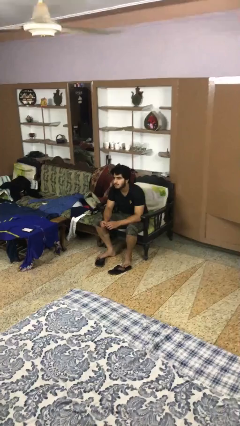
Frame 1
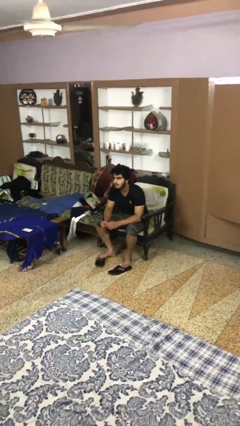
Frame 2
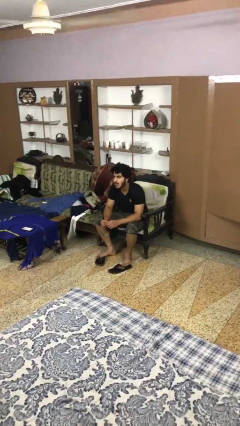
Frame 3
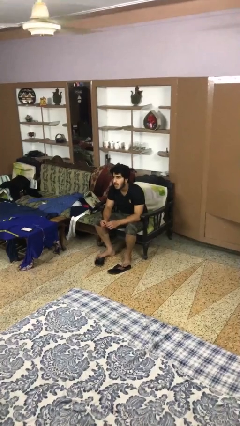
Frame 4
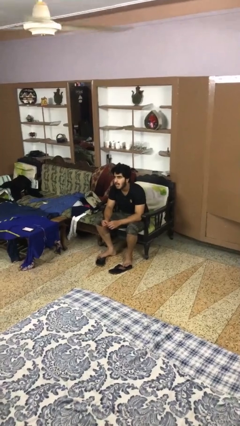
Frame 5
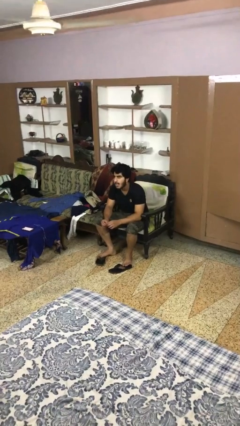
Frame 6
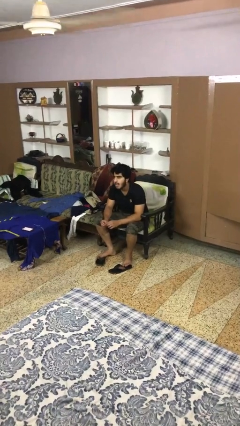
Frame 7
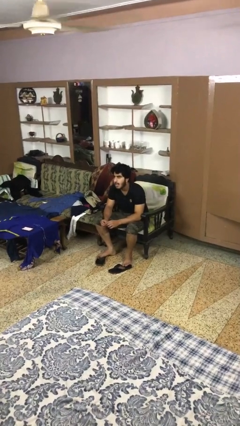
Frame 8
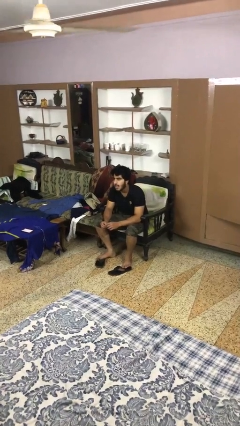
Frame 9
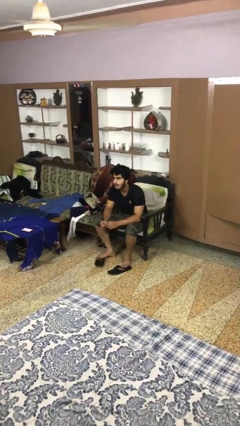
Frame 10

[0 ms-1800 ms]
person sticks out tongue

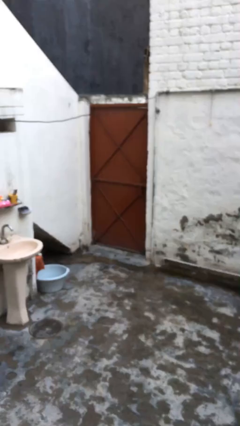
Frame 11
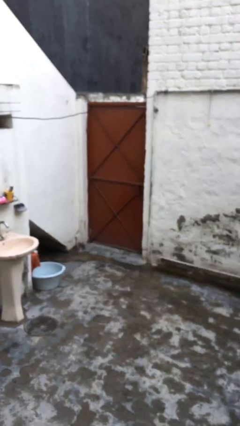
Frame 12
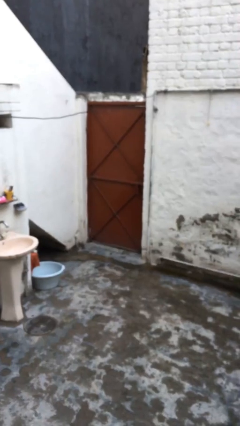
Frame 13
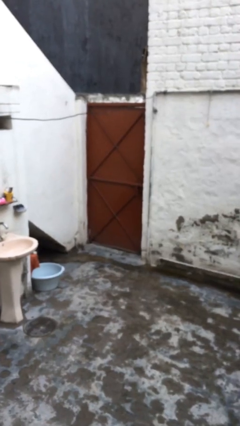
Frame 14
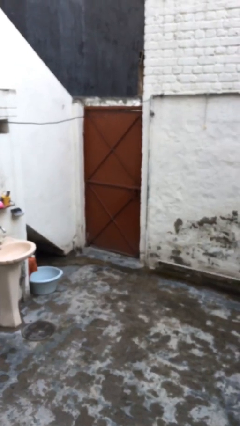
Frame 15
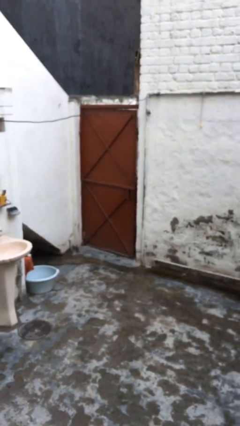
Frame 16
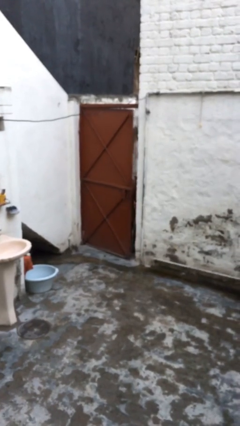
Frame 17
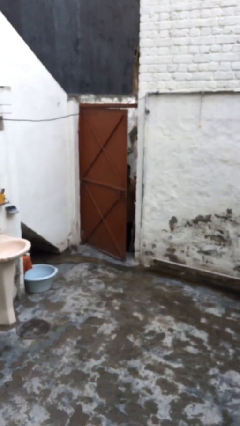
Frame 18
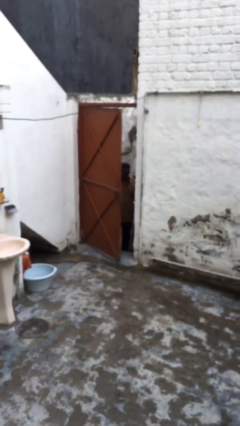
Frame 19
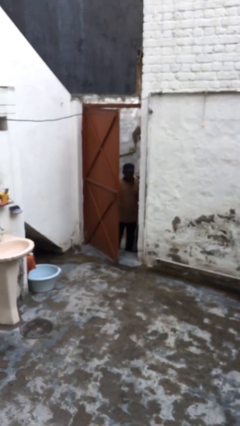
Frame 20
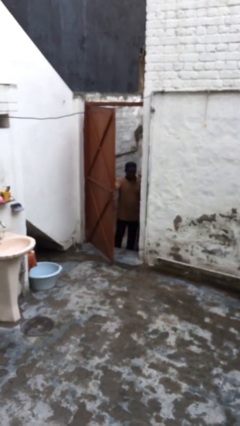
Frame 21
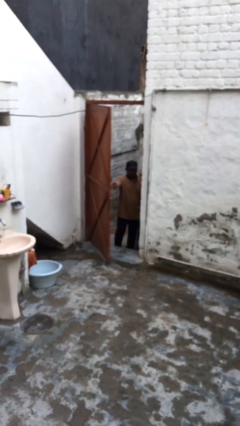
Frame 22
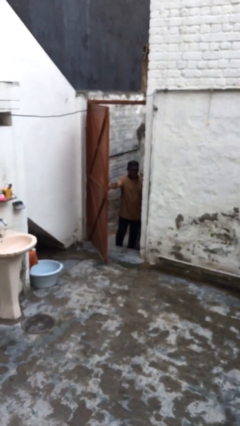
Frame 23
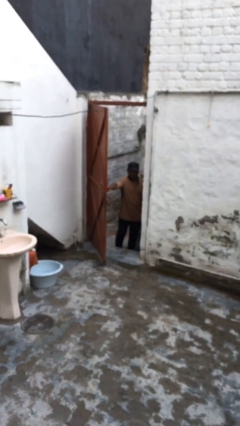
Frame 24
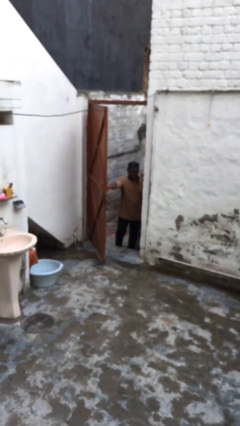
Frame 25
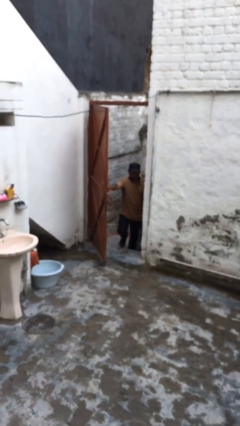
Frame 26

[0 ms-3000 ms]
person opens facility door

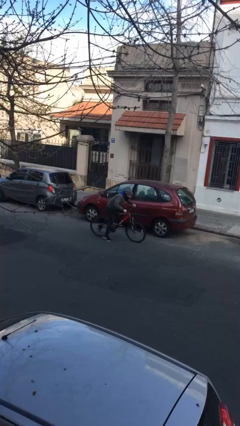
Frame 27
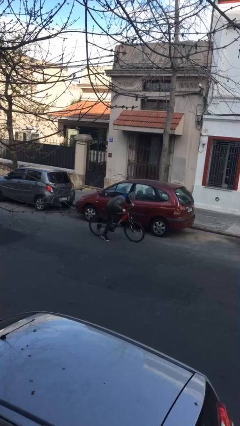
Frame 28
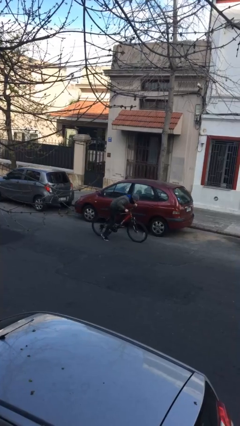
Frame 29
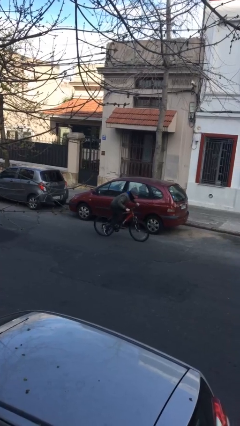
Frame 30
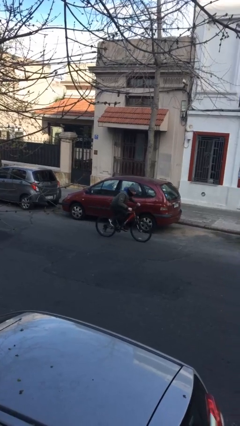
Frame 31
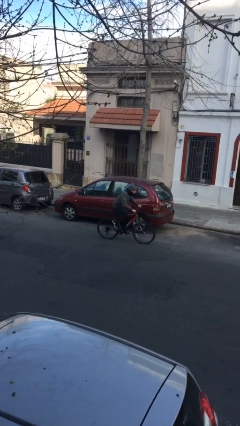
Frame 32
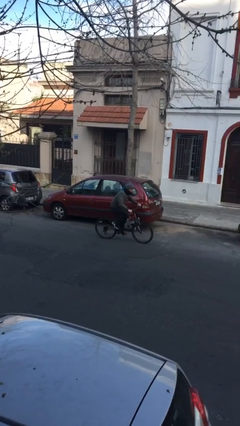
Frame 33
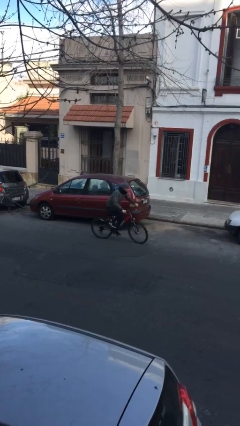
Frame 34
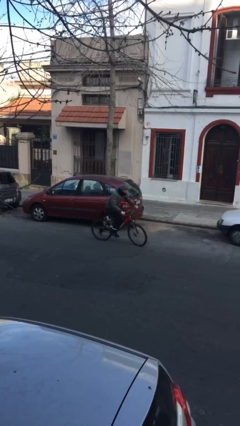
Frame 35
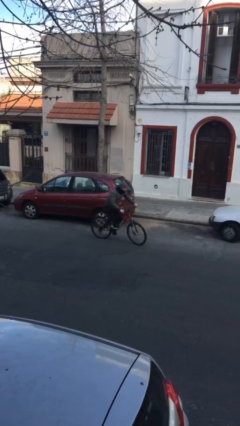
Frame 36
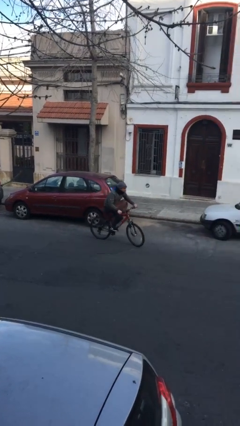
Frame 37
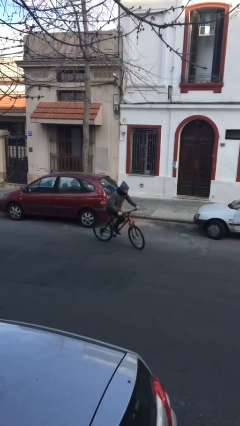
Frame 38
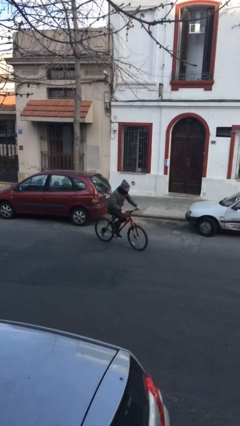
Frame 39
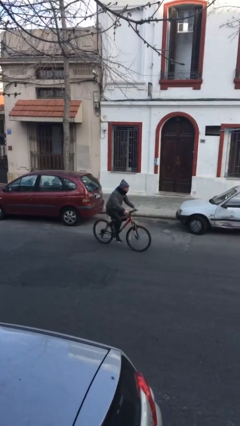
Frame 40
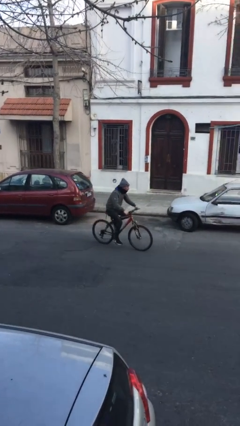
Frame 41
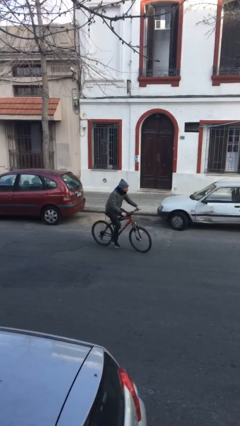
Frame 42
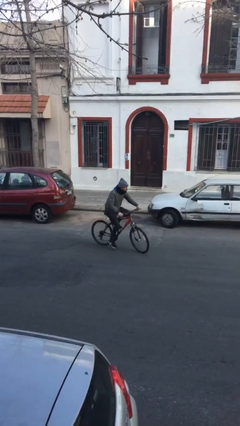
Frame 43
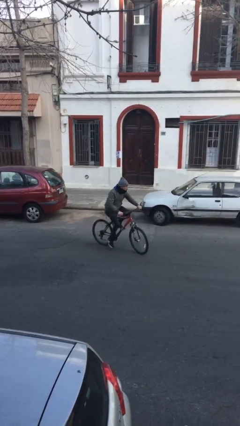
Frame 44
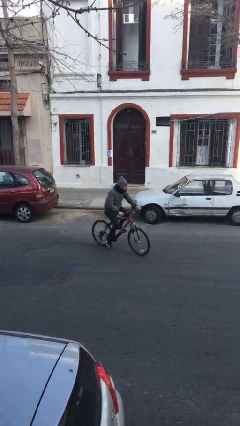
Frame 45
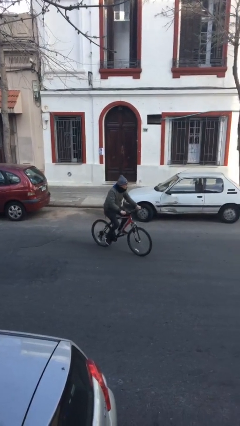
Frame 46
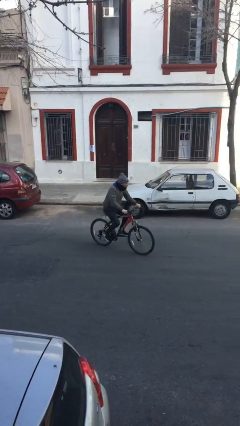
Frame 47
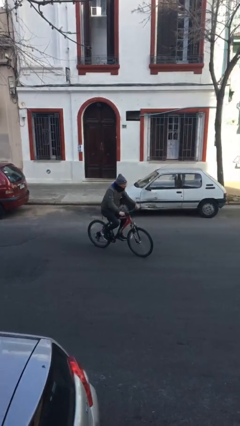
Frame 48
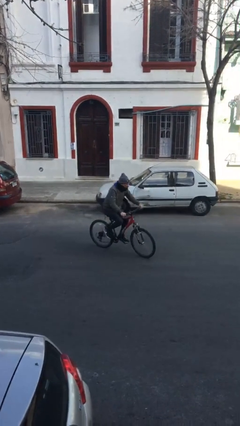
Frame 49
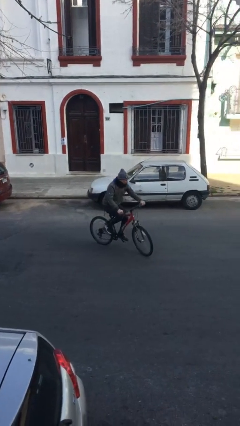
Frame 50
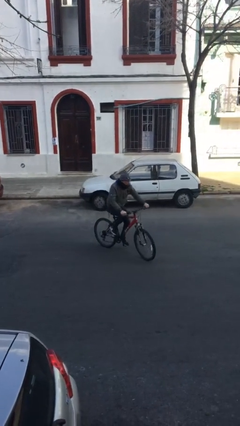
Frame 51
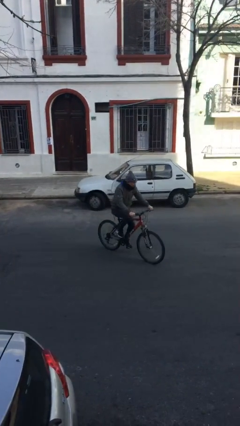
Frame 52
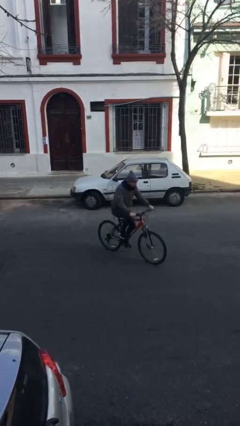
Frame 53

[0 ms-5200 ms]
person rides bicycle

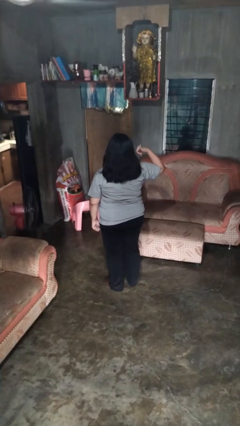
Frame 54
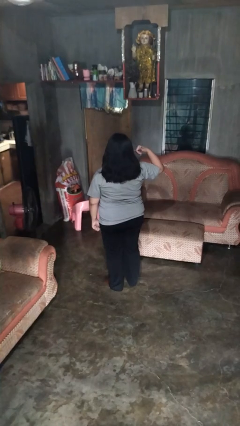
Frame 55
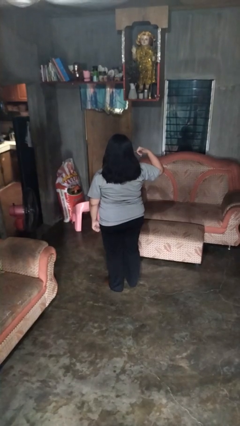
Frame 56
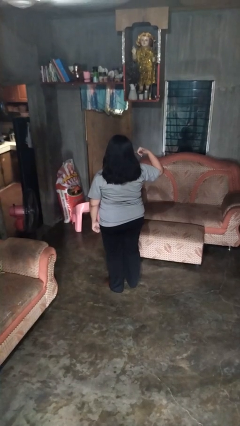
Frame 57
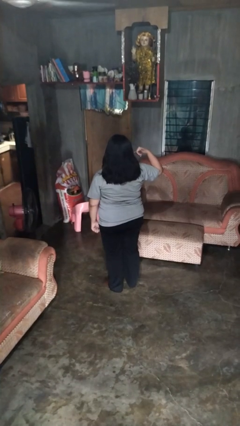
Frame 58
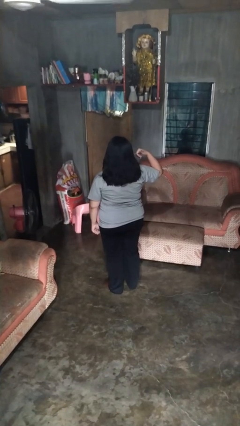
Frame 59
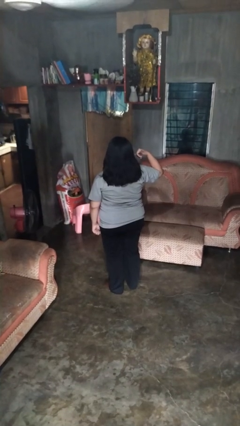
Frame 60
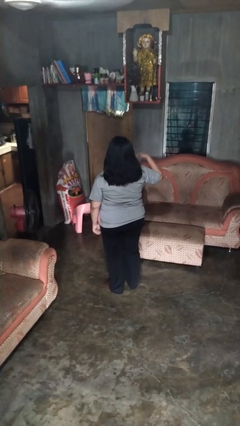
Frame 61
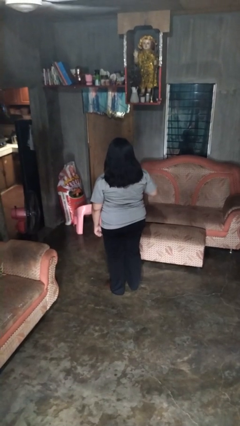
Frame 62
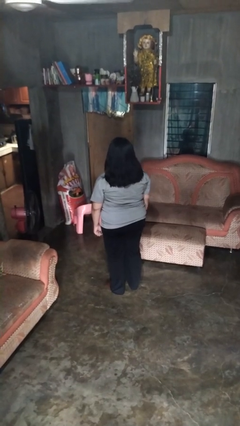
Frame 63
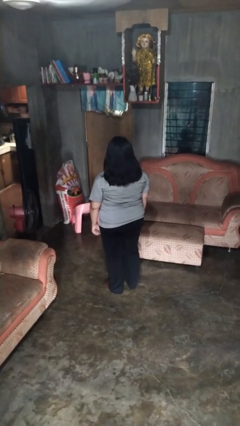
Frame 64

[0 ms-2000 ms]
person gestures call me

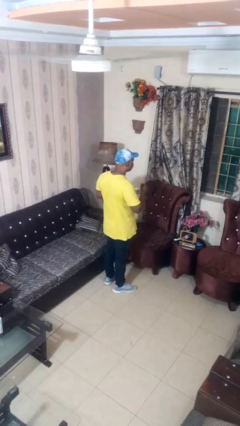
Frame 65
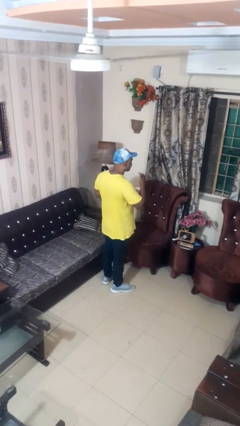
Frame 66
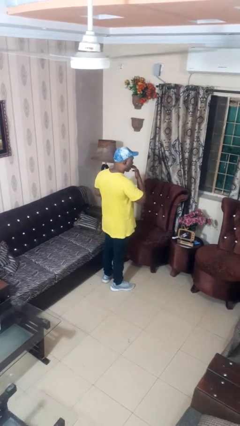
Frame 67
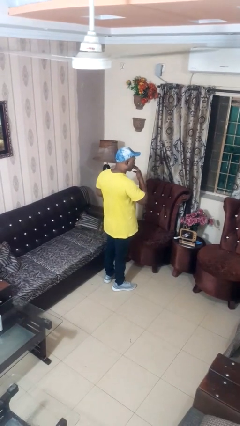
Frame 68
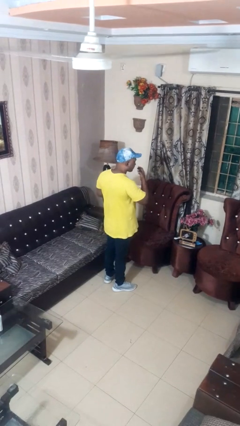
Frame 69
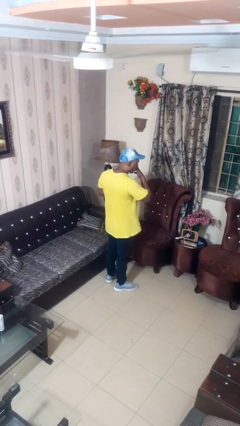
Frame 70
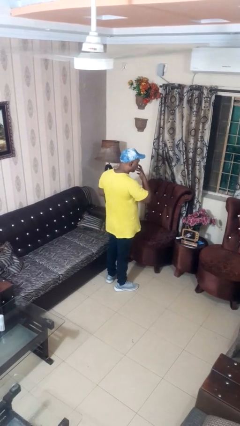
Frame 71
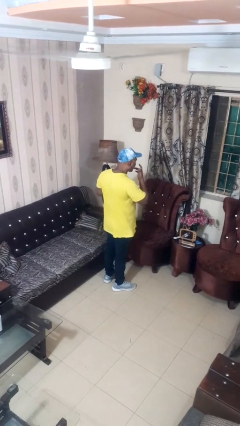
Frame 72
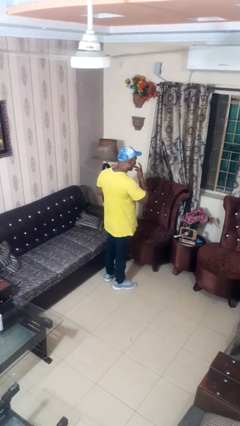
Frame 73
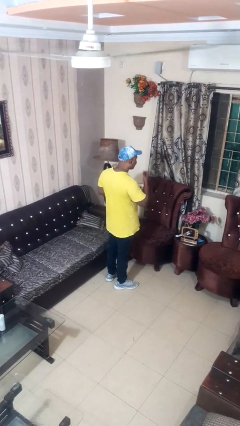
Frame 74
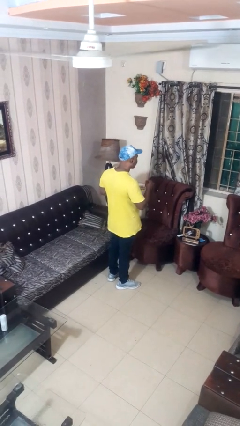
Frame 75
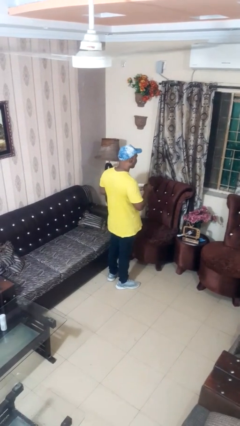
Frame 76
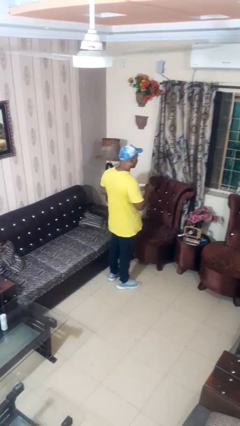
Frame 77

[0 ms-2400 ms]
person licks fingers

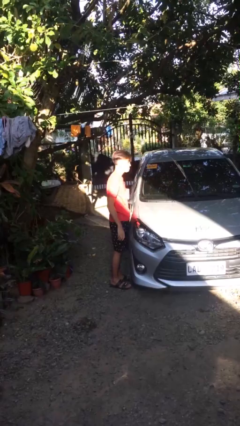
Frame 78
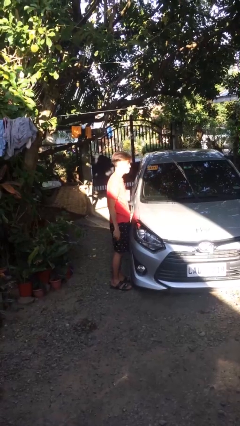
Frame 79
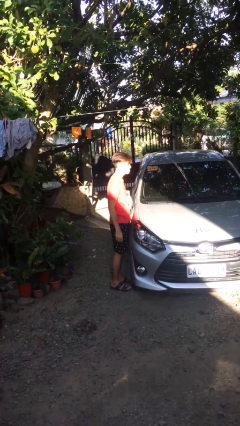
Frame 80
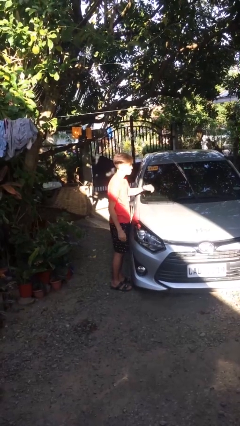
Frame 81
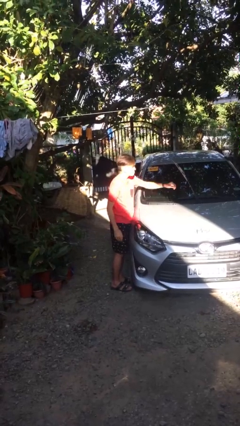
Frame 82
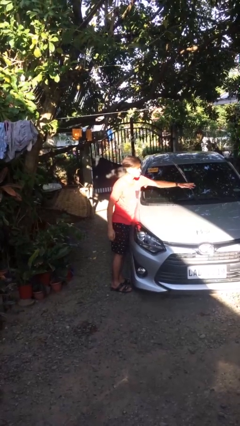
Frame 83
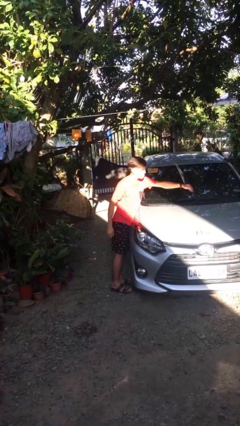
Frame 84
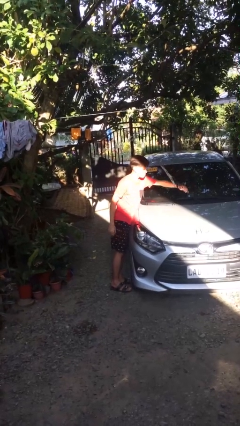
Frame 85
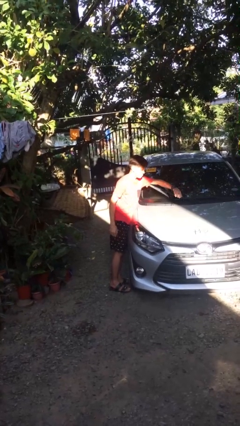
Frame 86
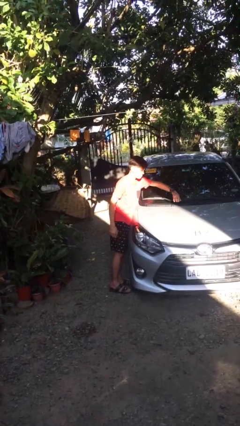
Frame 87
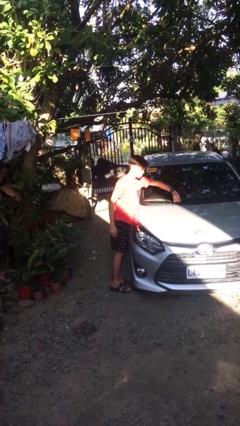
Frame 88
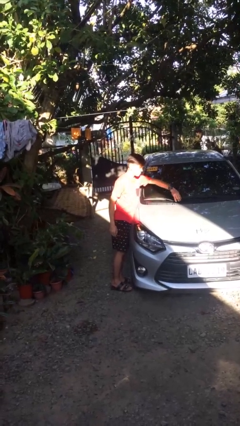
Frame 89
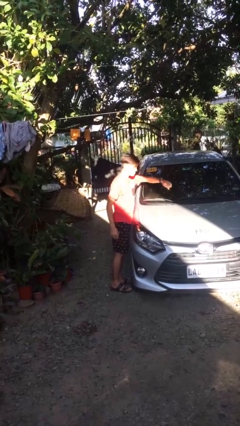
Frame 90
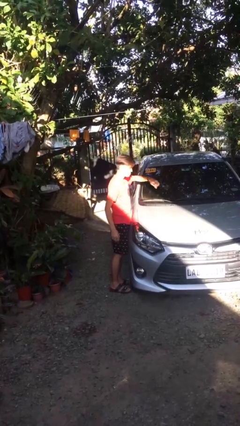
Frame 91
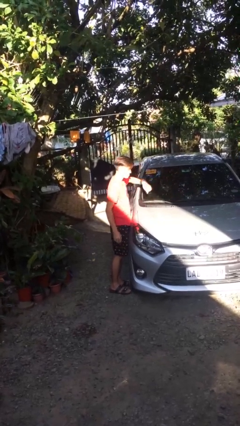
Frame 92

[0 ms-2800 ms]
person flips down car wipers
